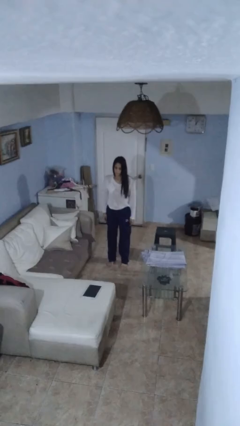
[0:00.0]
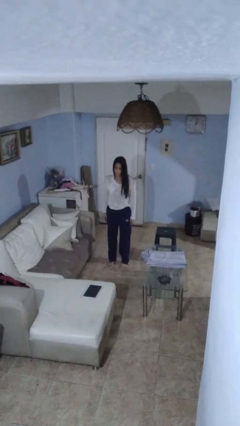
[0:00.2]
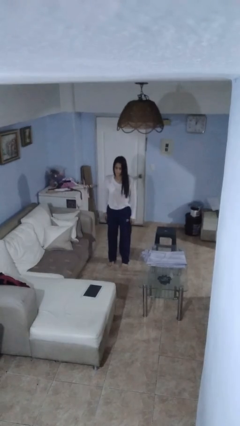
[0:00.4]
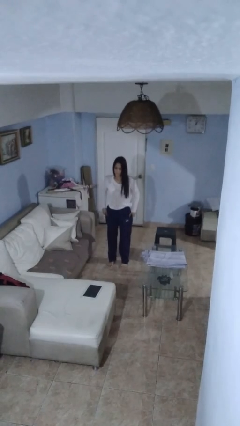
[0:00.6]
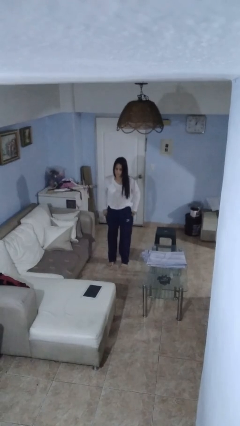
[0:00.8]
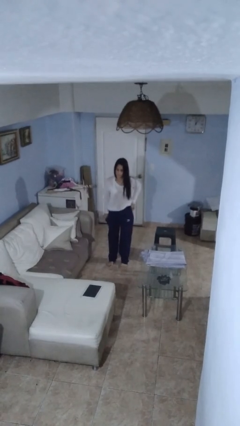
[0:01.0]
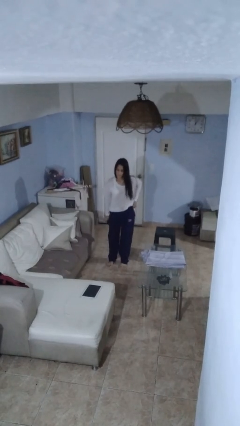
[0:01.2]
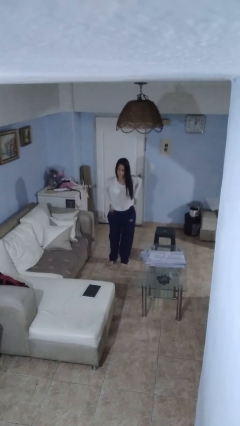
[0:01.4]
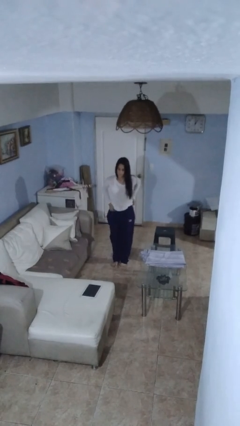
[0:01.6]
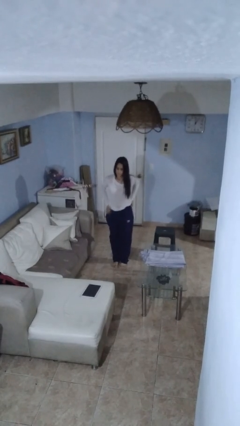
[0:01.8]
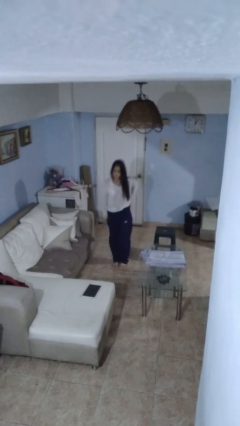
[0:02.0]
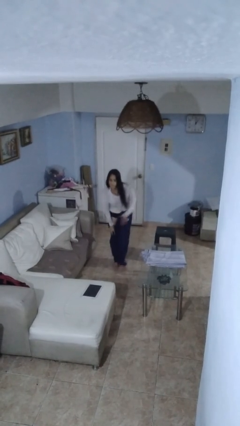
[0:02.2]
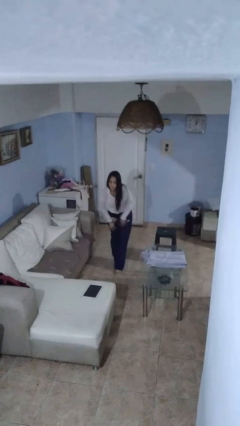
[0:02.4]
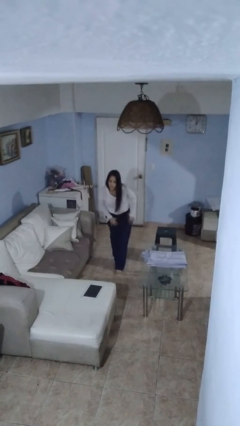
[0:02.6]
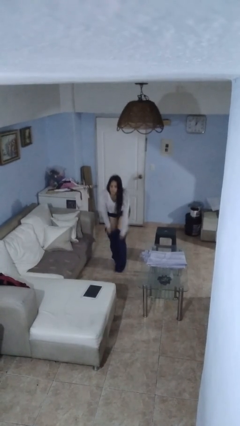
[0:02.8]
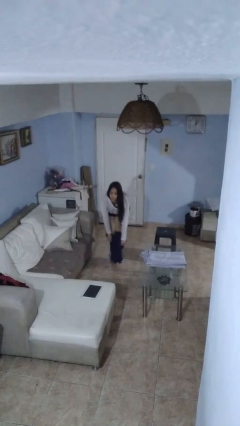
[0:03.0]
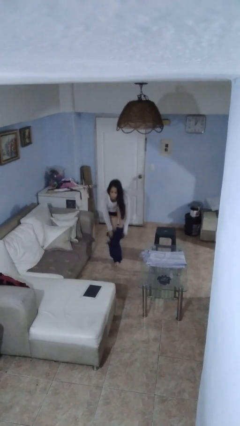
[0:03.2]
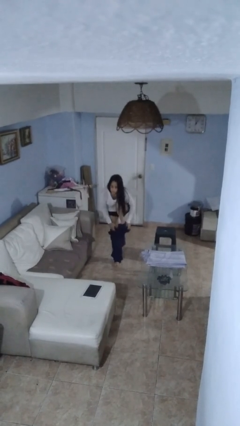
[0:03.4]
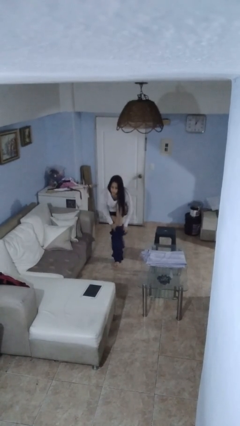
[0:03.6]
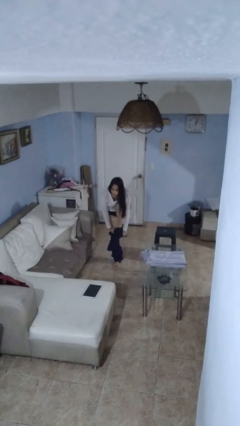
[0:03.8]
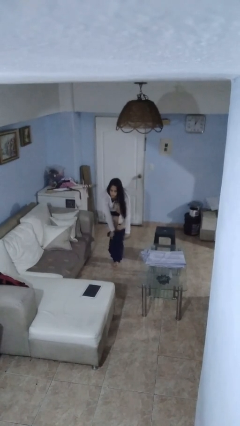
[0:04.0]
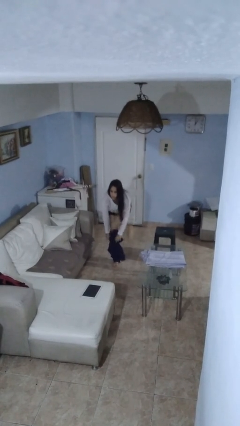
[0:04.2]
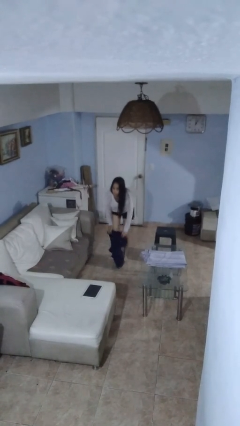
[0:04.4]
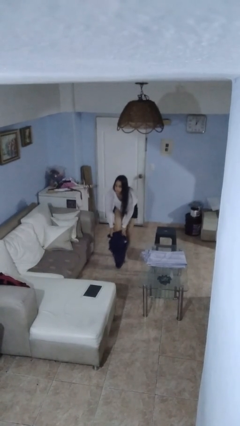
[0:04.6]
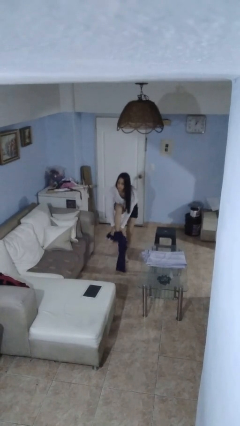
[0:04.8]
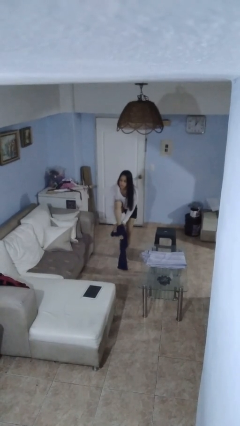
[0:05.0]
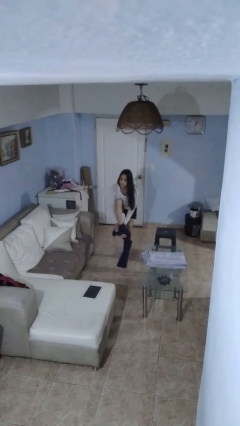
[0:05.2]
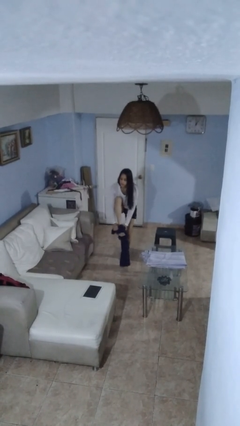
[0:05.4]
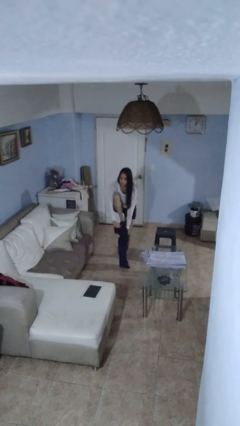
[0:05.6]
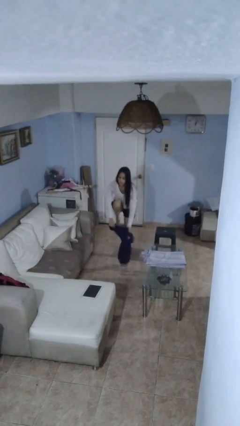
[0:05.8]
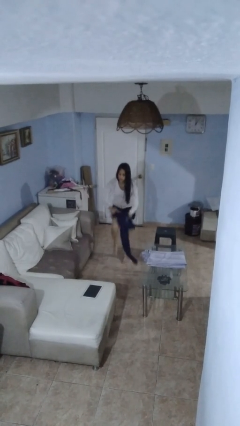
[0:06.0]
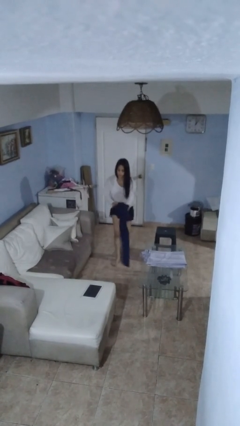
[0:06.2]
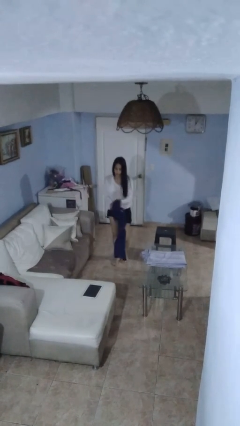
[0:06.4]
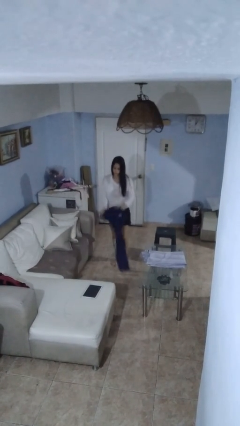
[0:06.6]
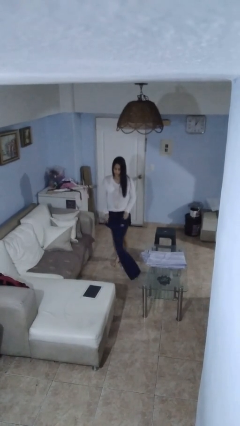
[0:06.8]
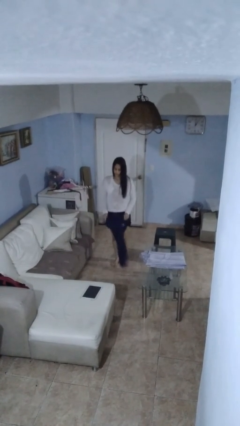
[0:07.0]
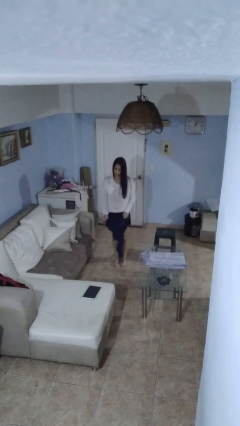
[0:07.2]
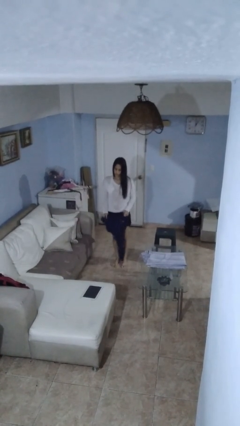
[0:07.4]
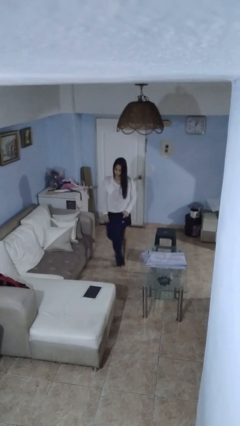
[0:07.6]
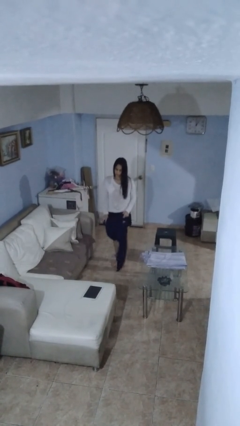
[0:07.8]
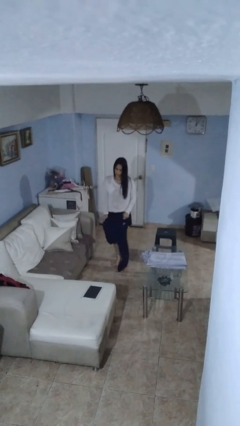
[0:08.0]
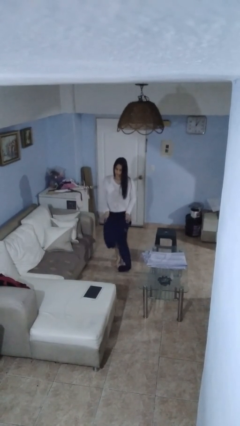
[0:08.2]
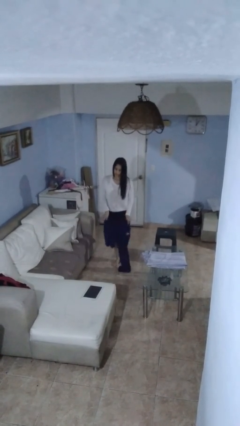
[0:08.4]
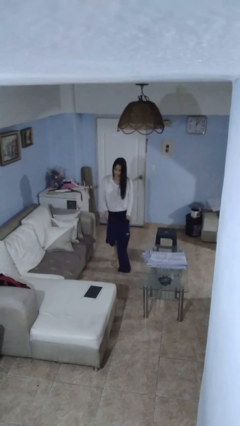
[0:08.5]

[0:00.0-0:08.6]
person takes off pants

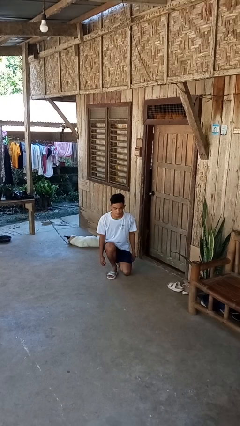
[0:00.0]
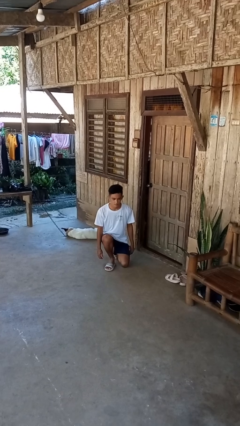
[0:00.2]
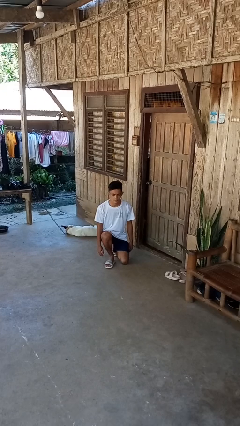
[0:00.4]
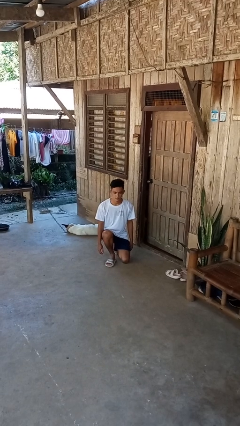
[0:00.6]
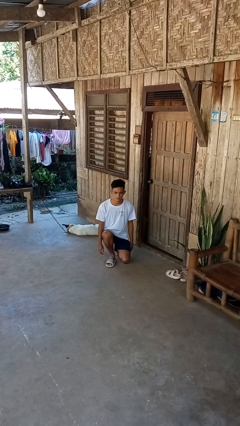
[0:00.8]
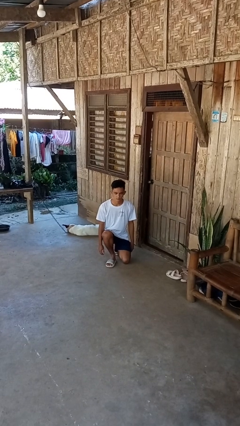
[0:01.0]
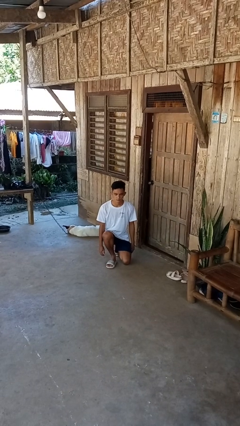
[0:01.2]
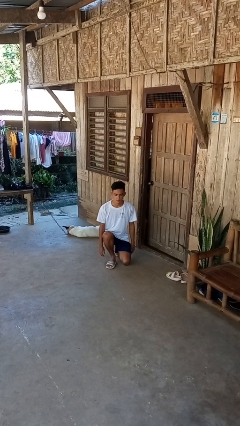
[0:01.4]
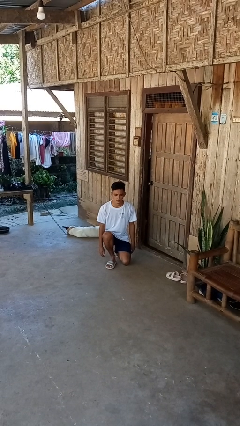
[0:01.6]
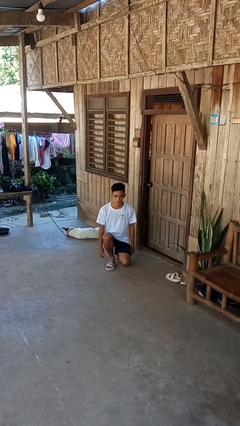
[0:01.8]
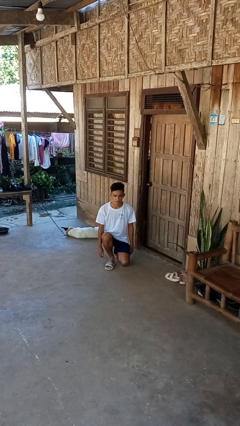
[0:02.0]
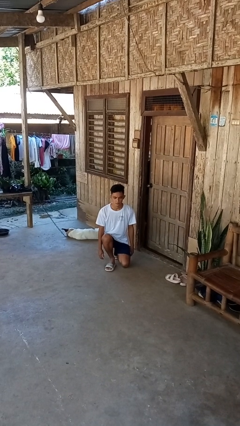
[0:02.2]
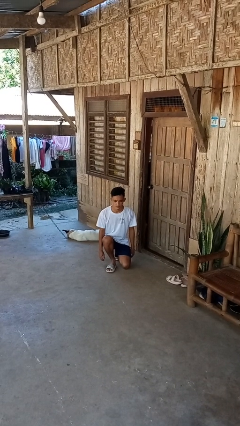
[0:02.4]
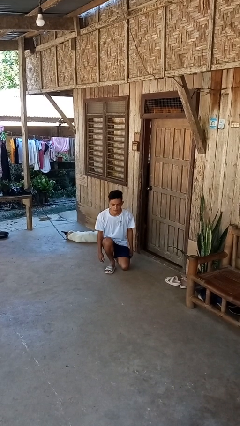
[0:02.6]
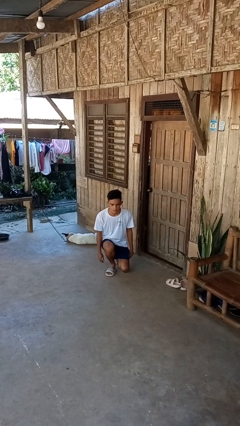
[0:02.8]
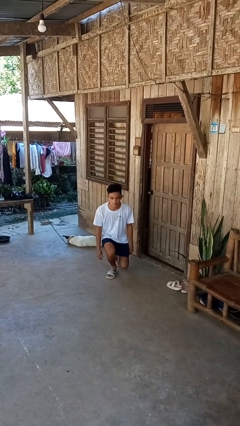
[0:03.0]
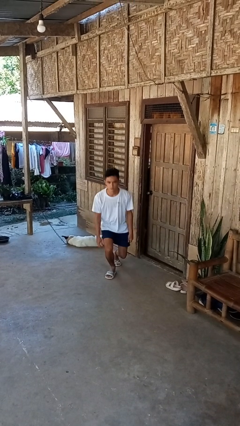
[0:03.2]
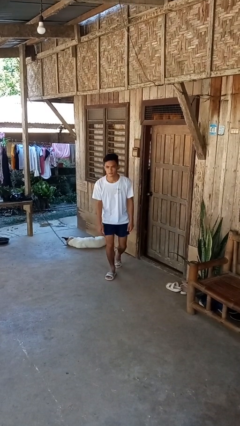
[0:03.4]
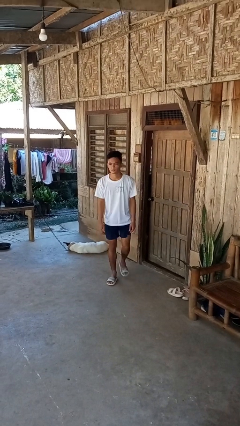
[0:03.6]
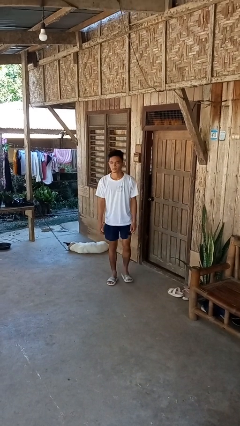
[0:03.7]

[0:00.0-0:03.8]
person kneels

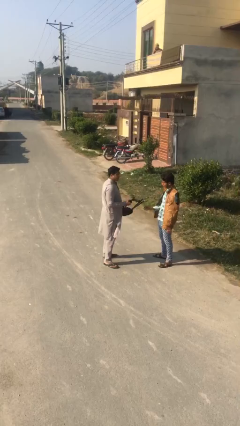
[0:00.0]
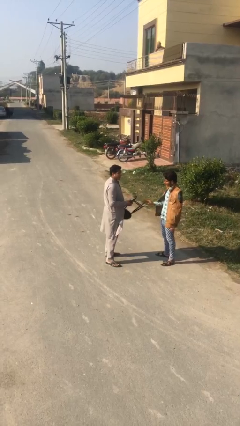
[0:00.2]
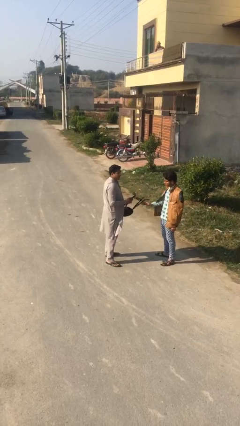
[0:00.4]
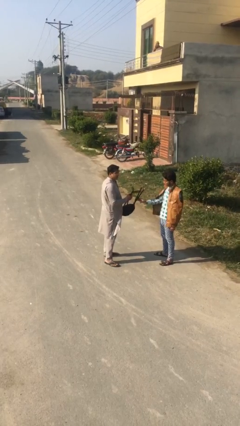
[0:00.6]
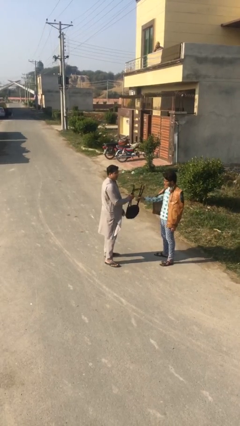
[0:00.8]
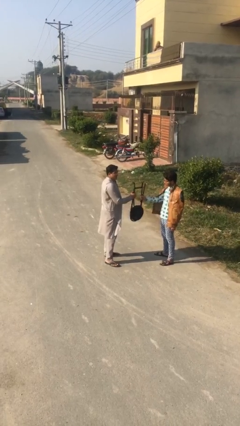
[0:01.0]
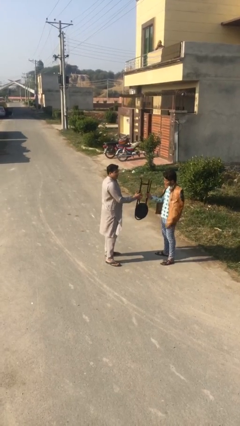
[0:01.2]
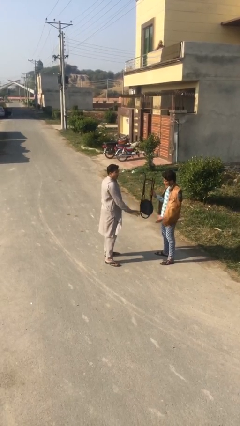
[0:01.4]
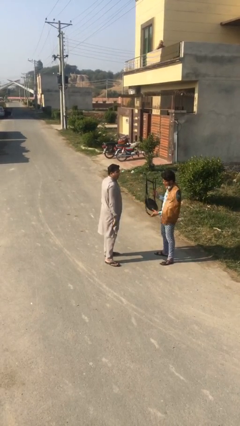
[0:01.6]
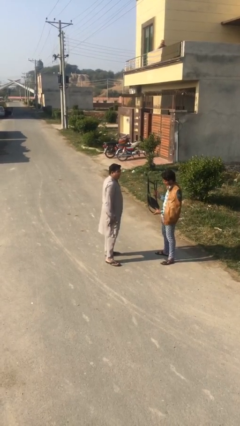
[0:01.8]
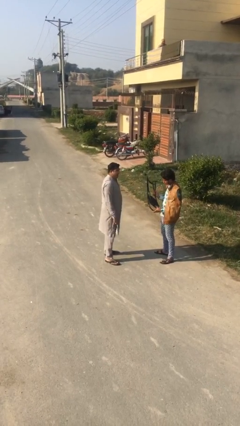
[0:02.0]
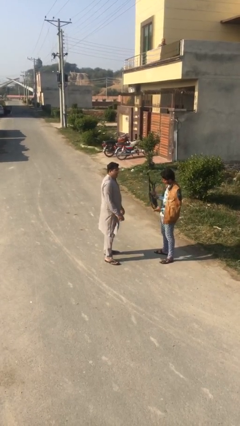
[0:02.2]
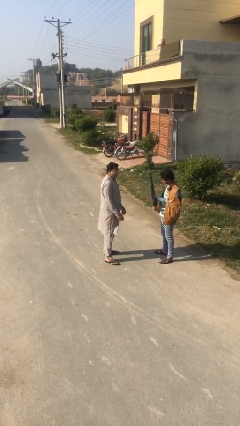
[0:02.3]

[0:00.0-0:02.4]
person transfers object to person

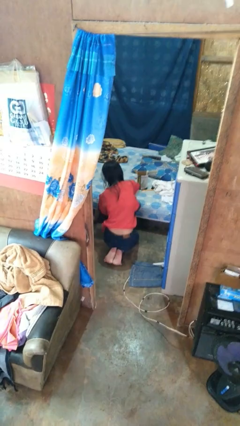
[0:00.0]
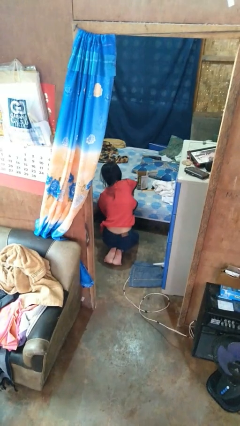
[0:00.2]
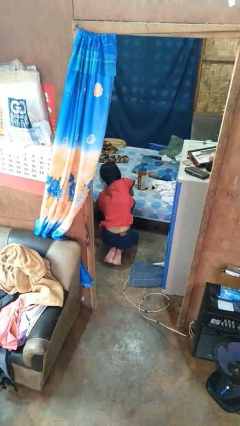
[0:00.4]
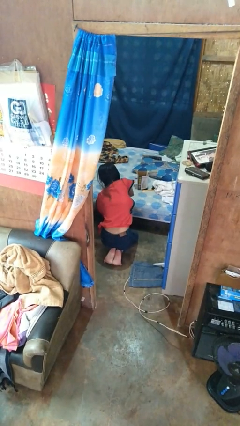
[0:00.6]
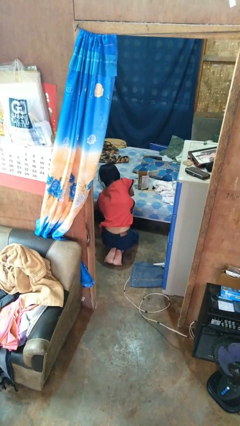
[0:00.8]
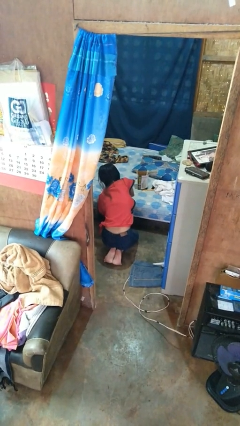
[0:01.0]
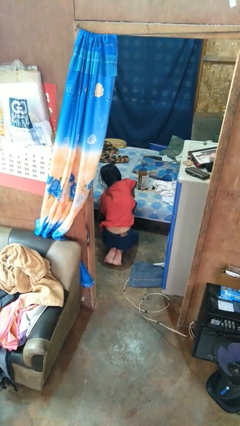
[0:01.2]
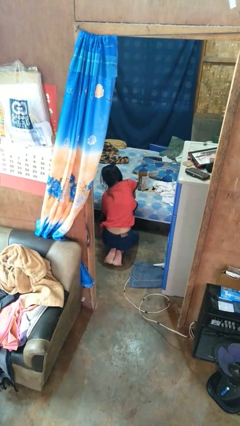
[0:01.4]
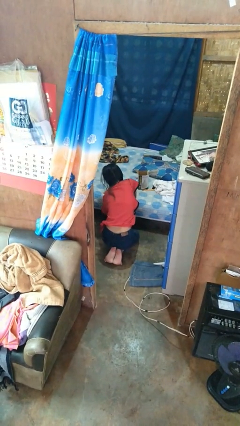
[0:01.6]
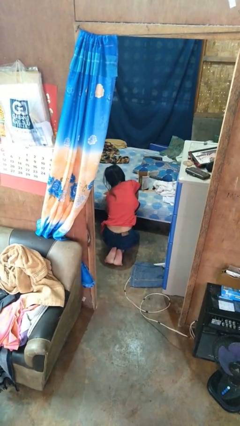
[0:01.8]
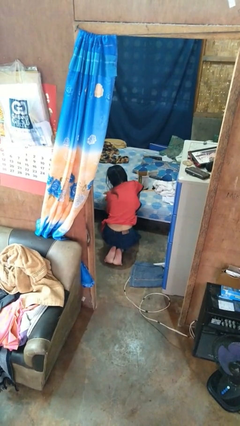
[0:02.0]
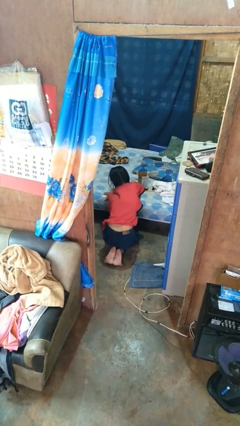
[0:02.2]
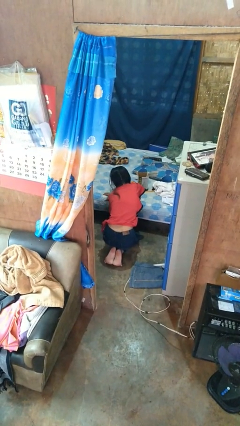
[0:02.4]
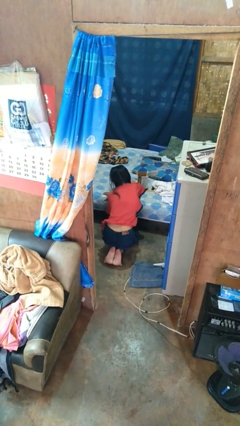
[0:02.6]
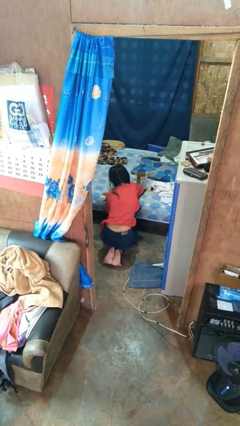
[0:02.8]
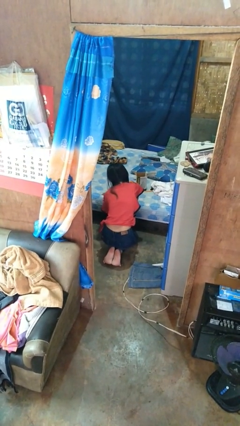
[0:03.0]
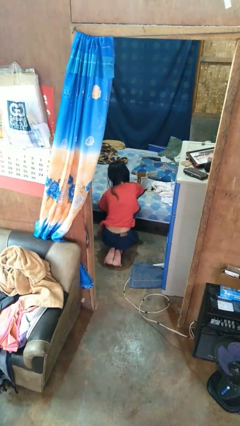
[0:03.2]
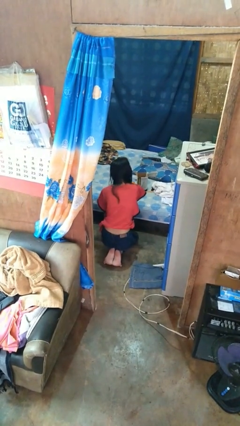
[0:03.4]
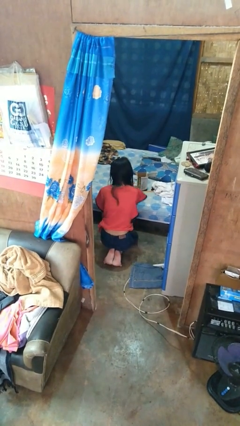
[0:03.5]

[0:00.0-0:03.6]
person searches under bed
